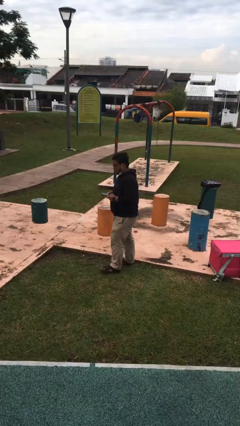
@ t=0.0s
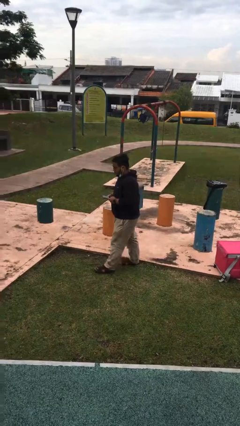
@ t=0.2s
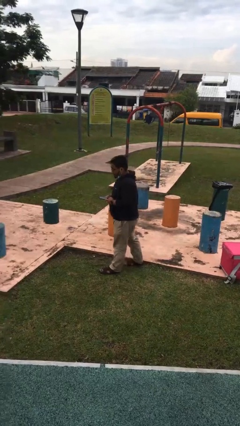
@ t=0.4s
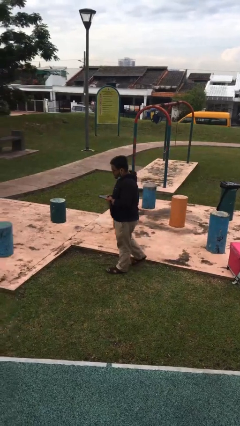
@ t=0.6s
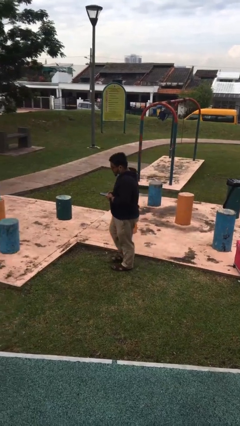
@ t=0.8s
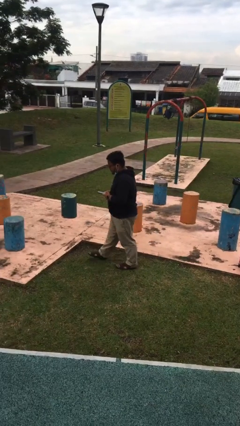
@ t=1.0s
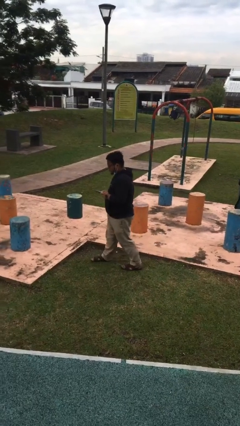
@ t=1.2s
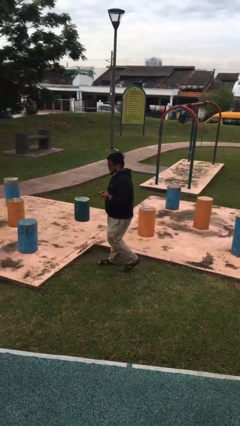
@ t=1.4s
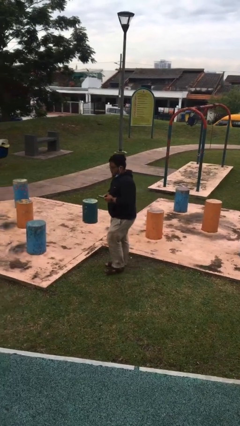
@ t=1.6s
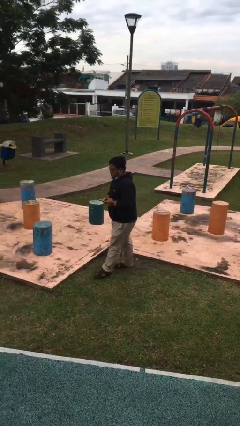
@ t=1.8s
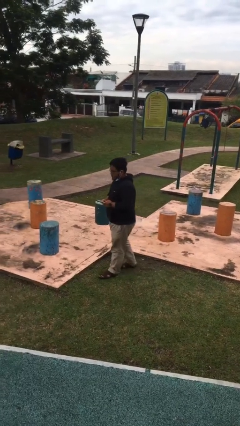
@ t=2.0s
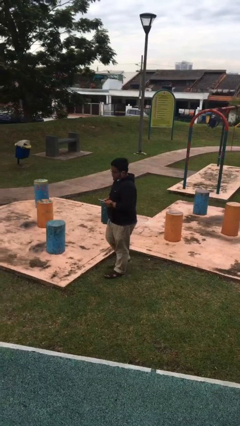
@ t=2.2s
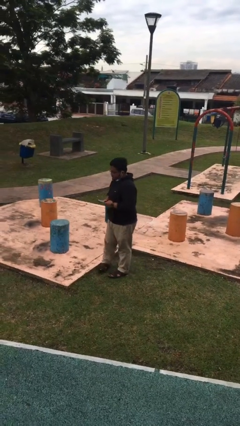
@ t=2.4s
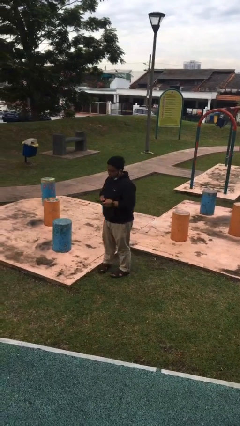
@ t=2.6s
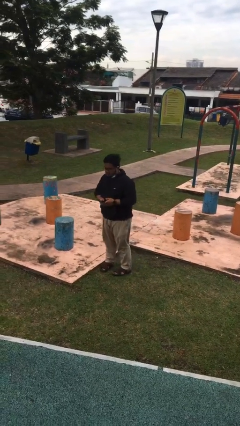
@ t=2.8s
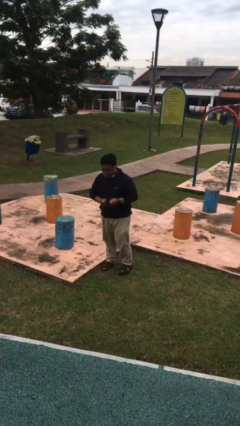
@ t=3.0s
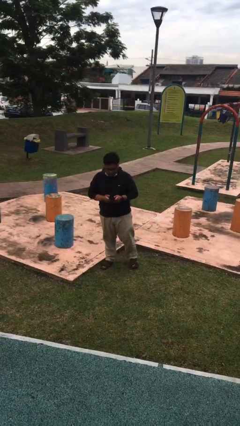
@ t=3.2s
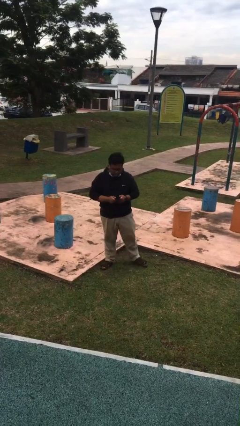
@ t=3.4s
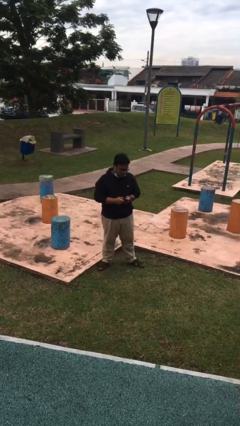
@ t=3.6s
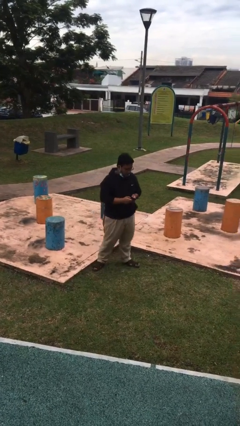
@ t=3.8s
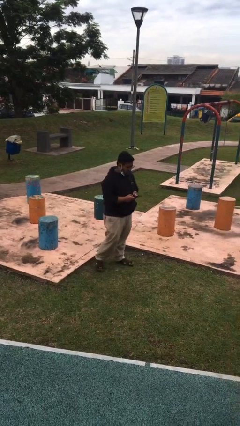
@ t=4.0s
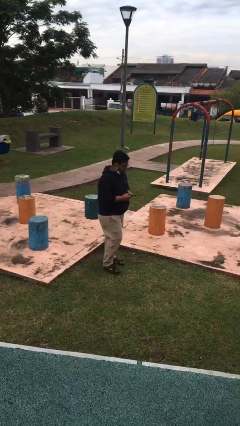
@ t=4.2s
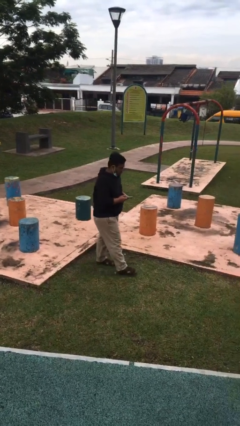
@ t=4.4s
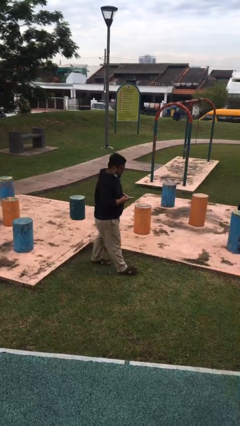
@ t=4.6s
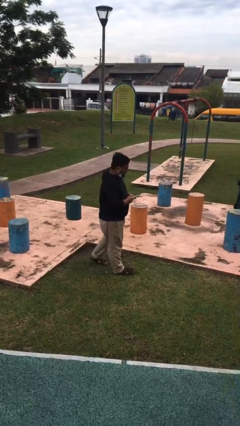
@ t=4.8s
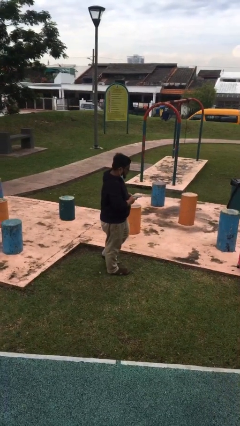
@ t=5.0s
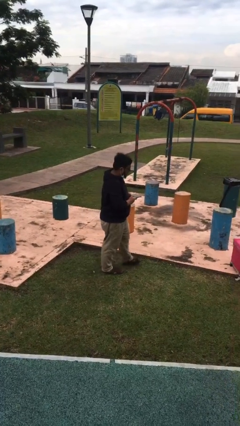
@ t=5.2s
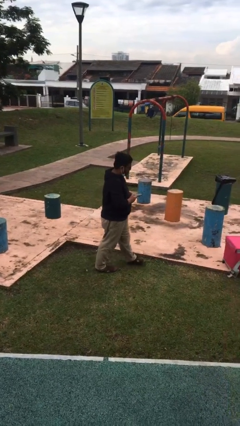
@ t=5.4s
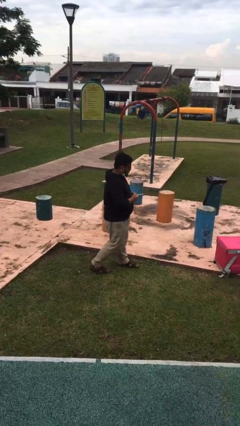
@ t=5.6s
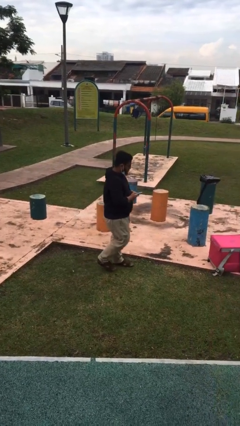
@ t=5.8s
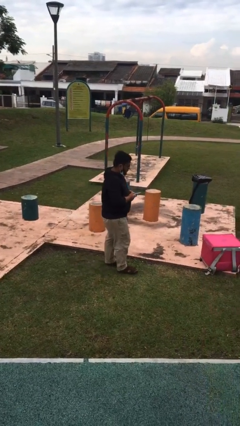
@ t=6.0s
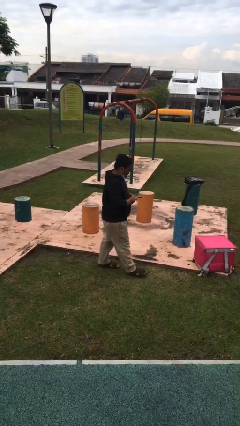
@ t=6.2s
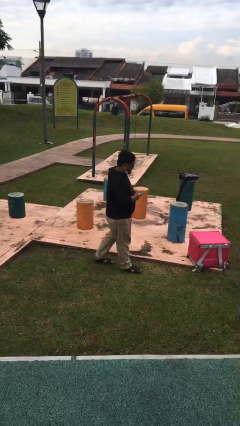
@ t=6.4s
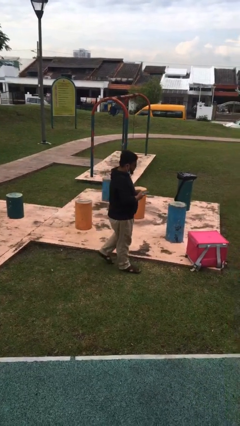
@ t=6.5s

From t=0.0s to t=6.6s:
person texts on phone

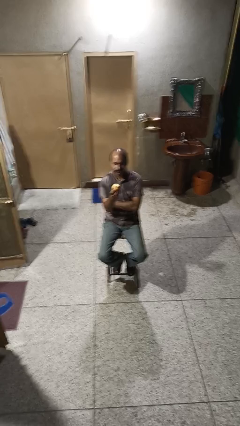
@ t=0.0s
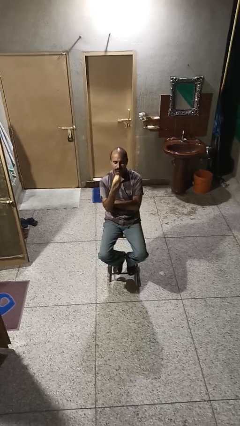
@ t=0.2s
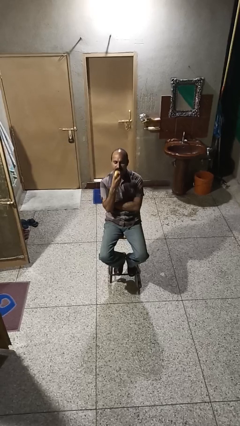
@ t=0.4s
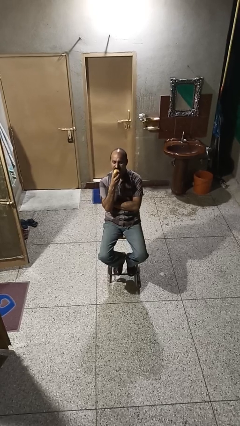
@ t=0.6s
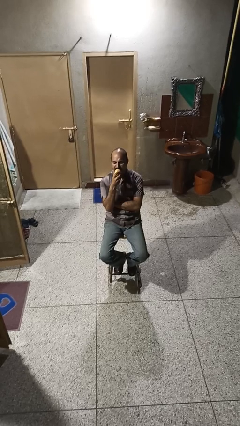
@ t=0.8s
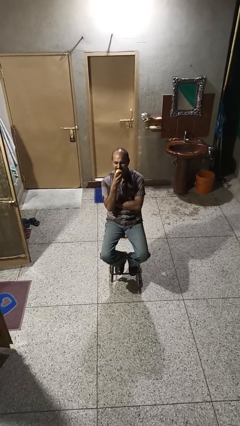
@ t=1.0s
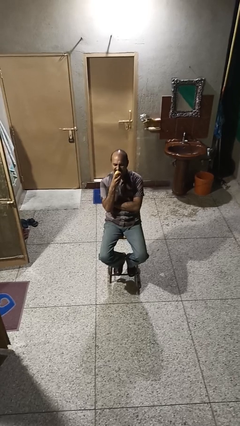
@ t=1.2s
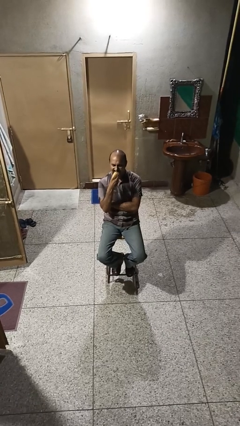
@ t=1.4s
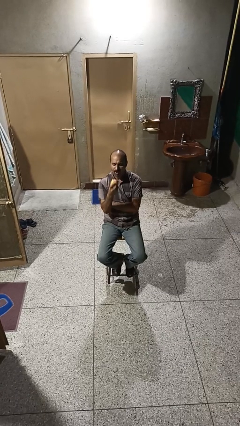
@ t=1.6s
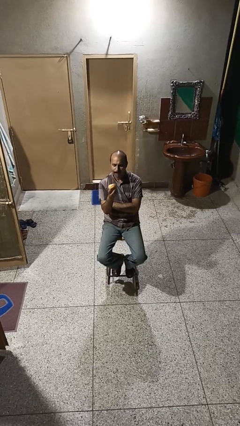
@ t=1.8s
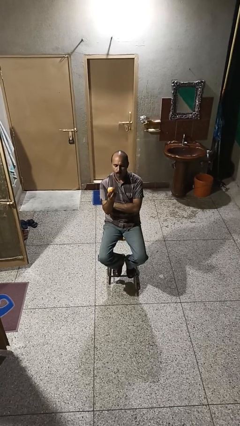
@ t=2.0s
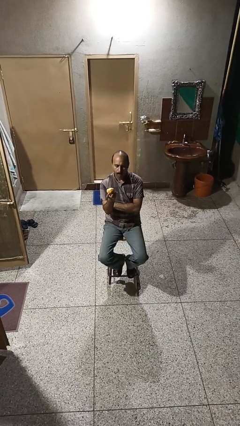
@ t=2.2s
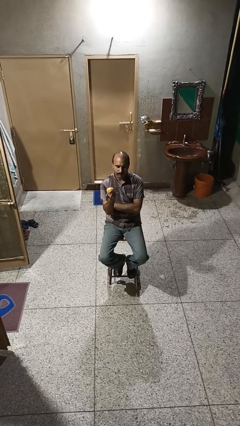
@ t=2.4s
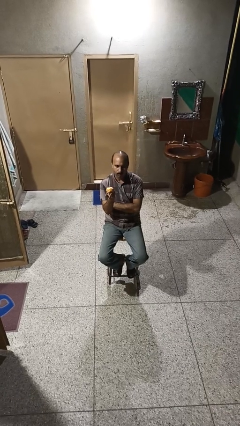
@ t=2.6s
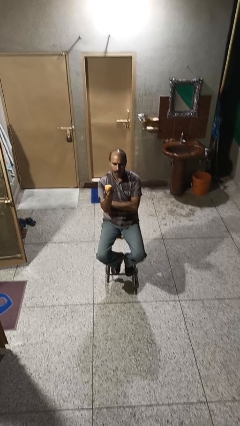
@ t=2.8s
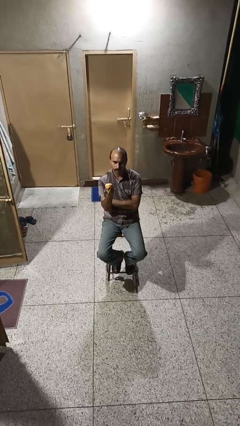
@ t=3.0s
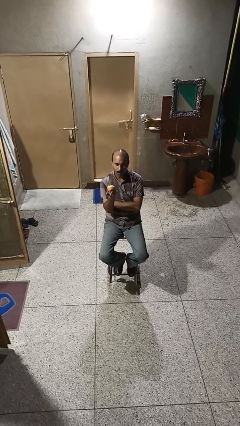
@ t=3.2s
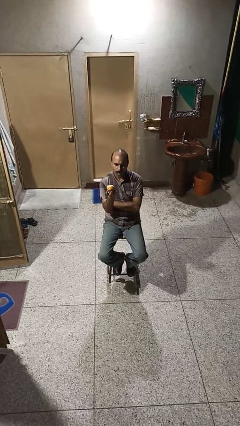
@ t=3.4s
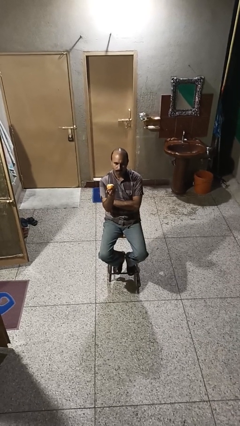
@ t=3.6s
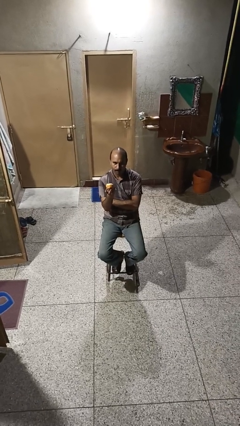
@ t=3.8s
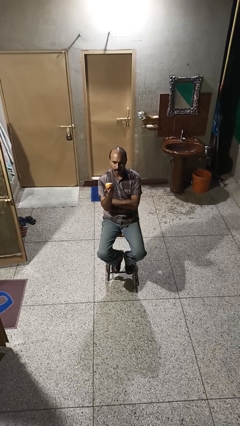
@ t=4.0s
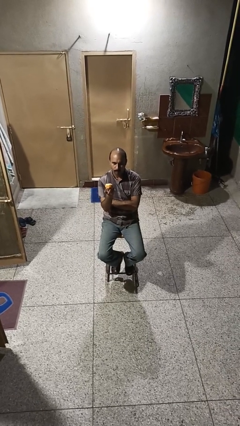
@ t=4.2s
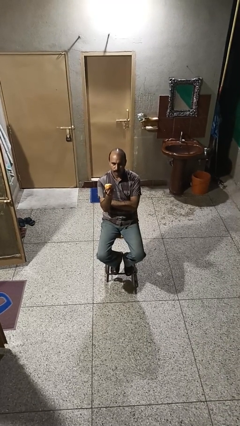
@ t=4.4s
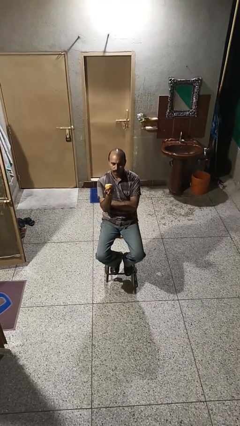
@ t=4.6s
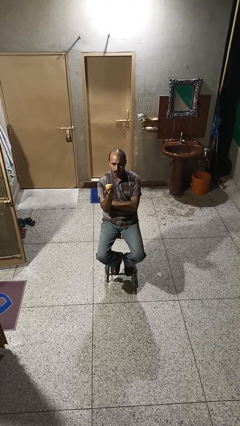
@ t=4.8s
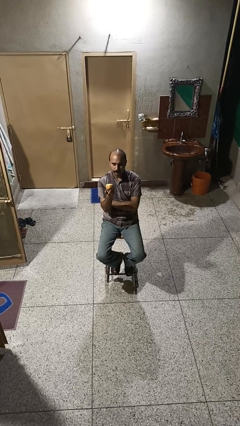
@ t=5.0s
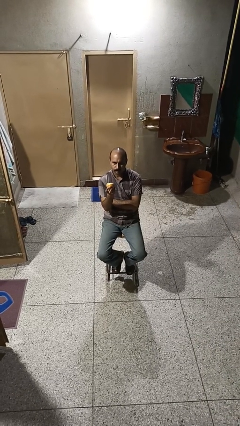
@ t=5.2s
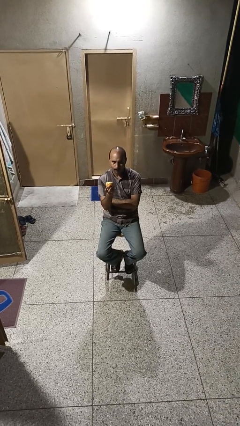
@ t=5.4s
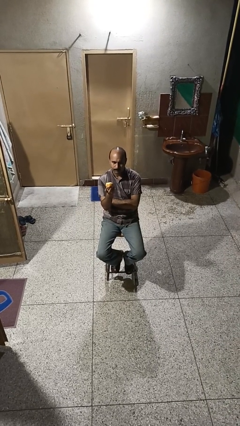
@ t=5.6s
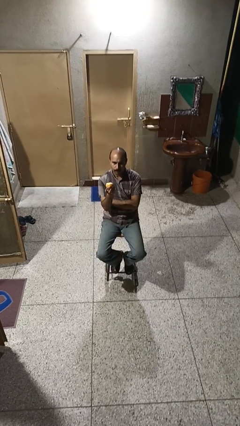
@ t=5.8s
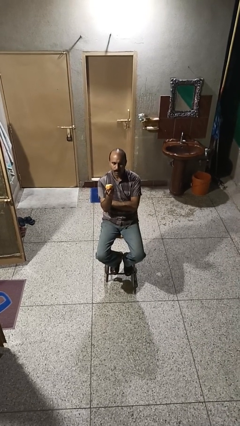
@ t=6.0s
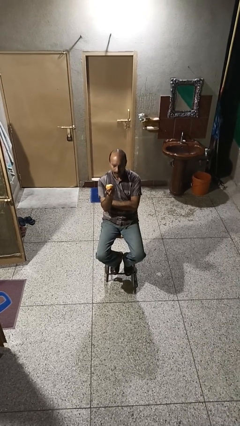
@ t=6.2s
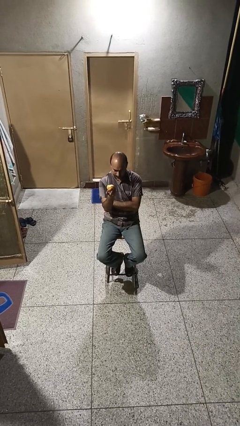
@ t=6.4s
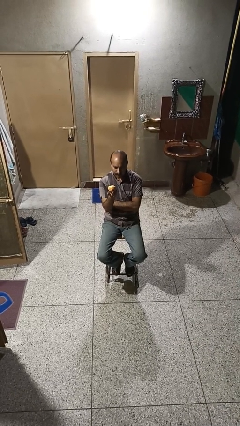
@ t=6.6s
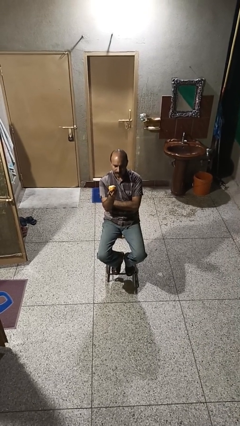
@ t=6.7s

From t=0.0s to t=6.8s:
person eats apple

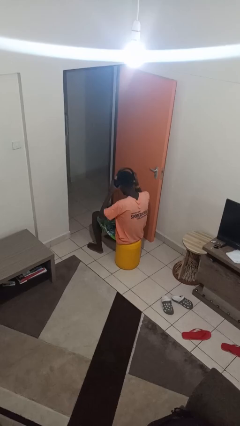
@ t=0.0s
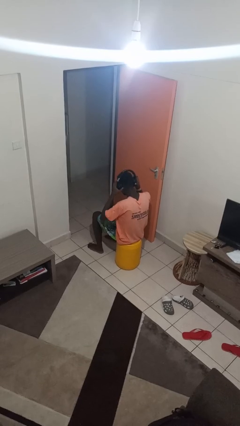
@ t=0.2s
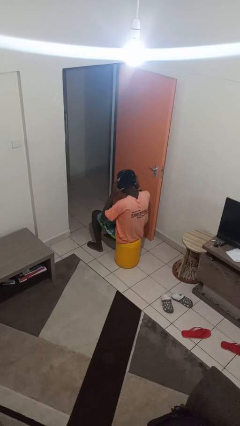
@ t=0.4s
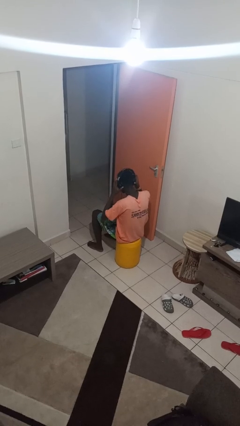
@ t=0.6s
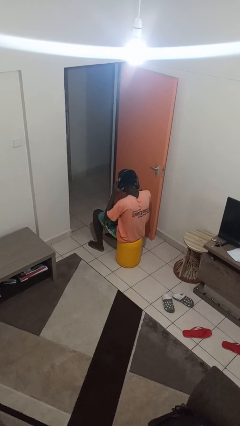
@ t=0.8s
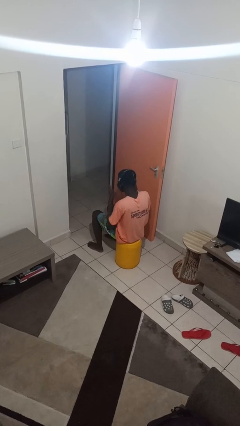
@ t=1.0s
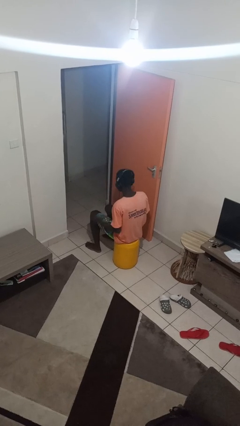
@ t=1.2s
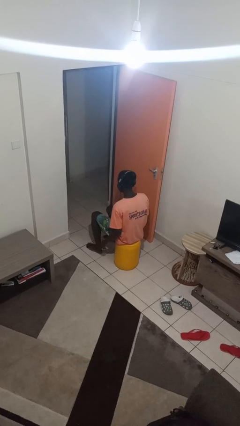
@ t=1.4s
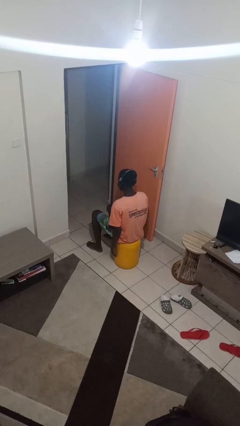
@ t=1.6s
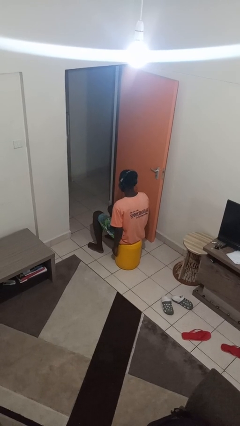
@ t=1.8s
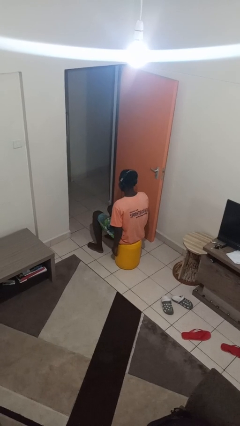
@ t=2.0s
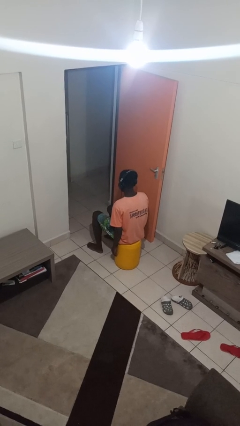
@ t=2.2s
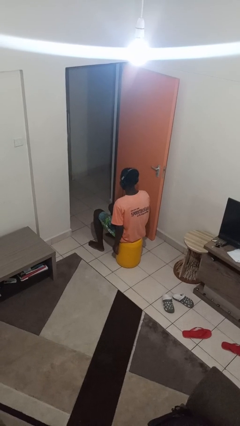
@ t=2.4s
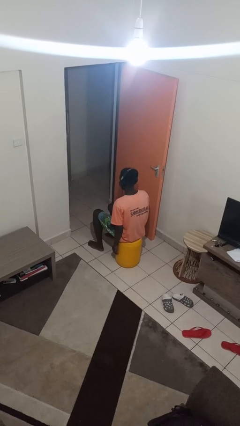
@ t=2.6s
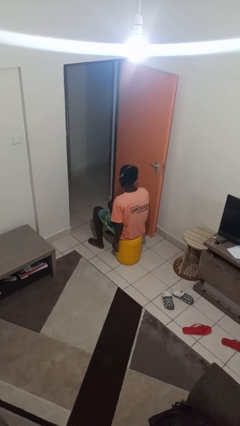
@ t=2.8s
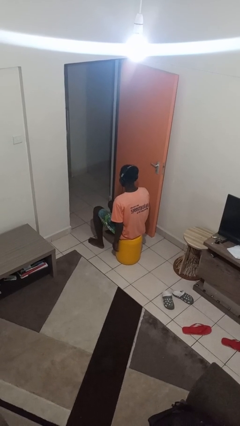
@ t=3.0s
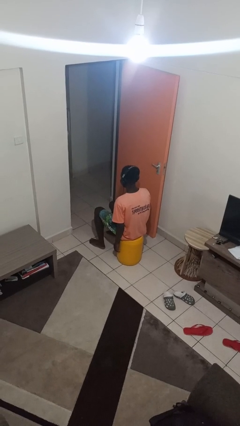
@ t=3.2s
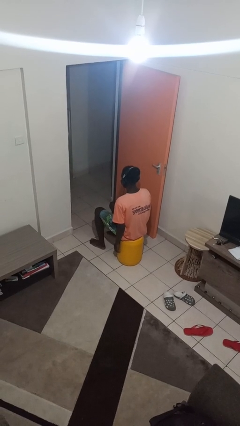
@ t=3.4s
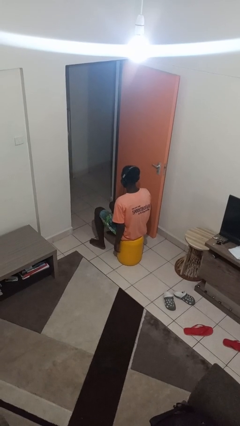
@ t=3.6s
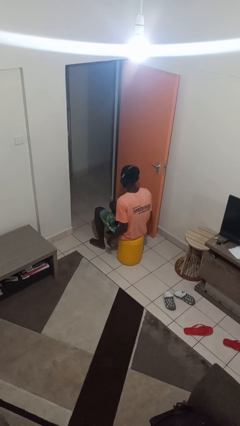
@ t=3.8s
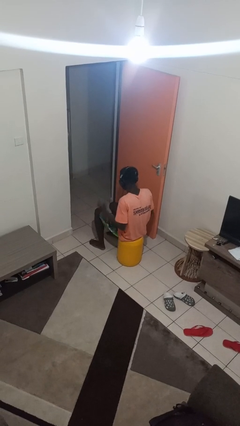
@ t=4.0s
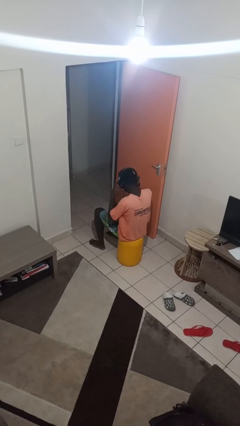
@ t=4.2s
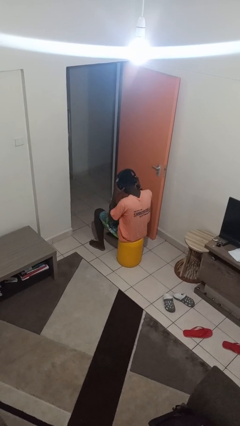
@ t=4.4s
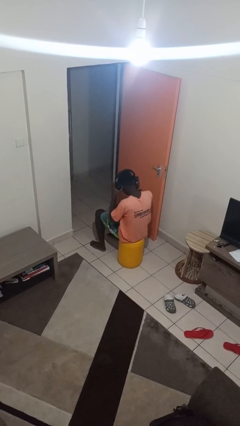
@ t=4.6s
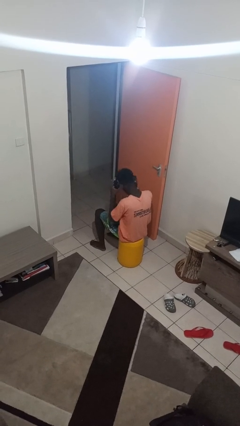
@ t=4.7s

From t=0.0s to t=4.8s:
person puts on headphones
